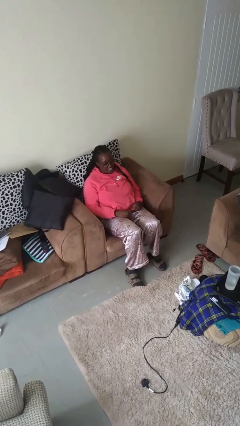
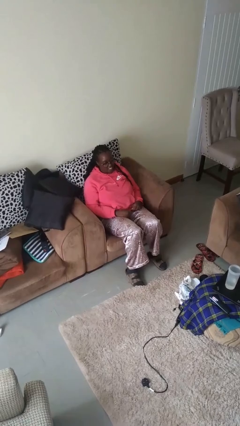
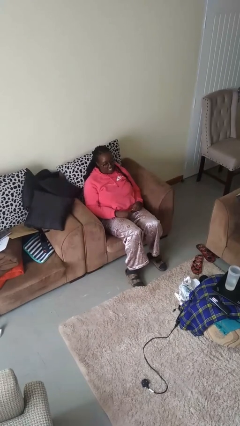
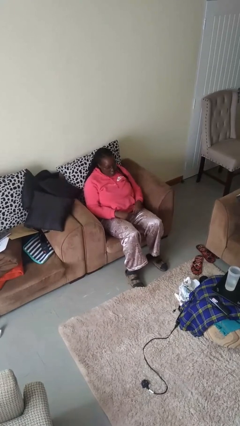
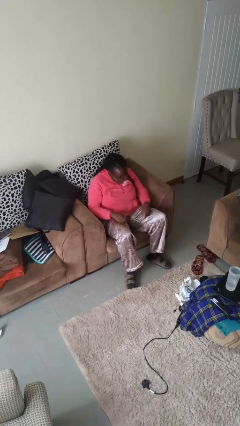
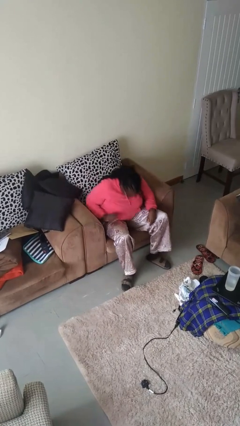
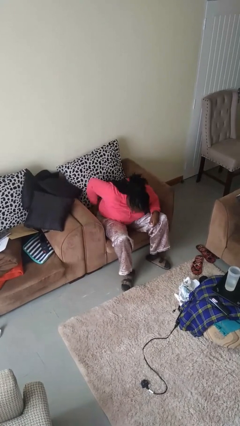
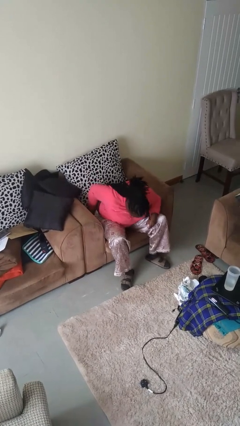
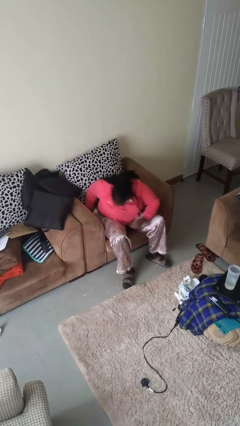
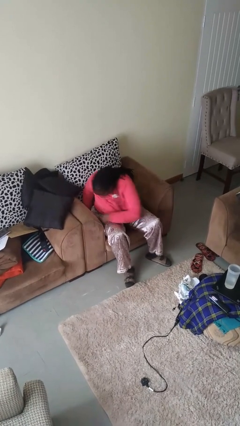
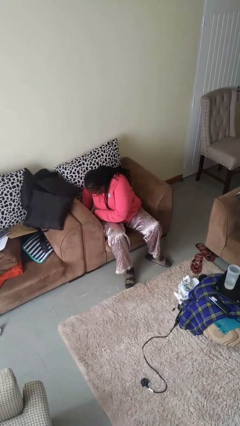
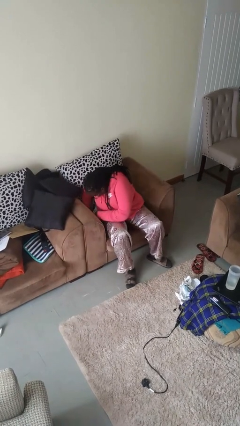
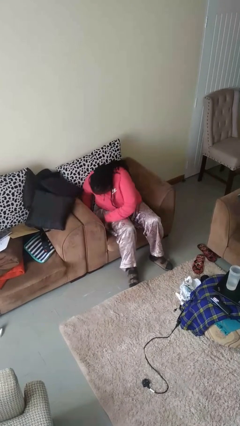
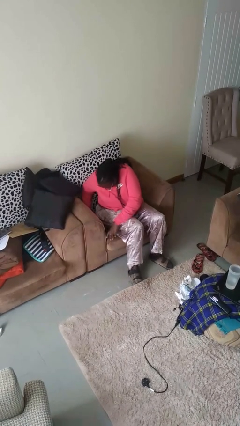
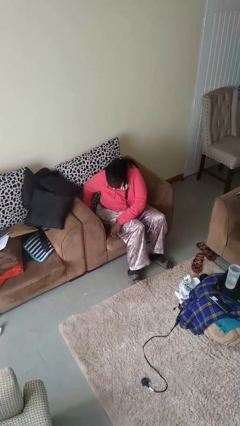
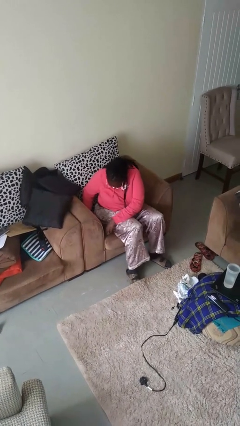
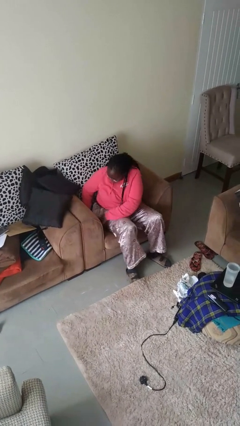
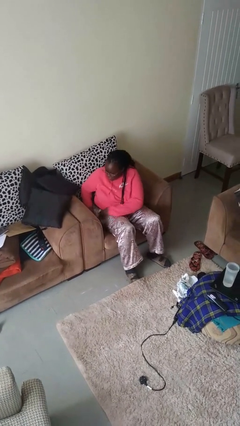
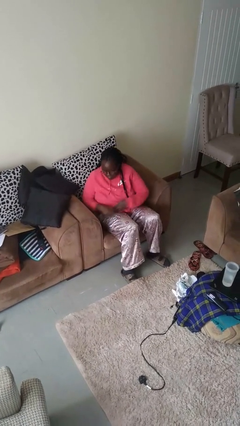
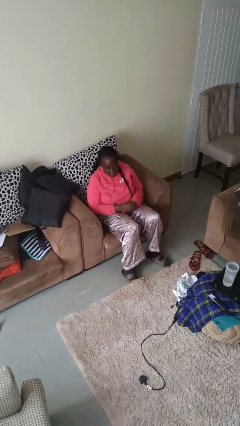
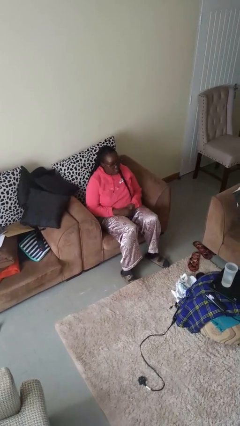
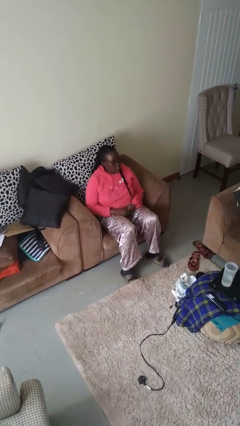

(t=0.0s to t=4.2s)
person searches in couch

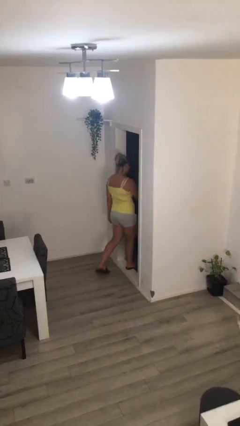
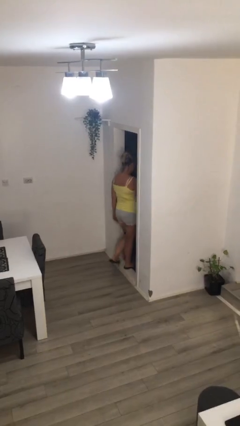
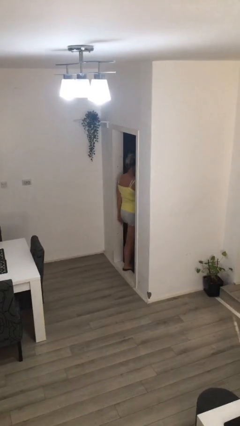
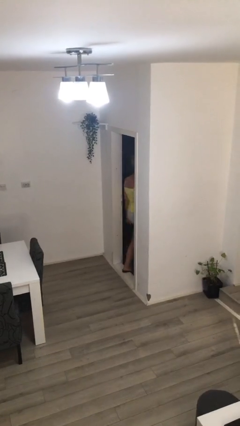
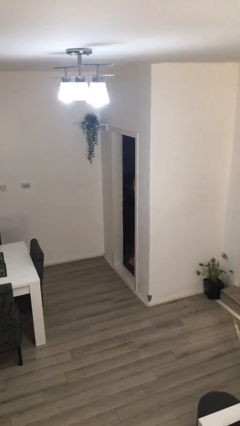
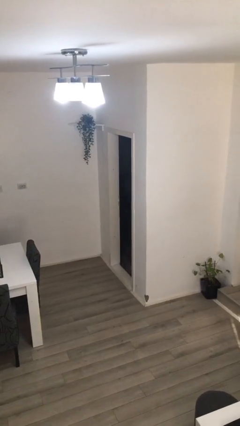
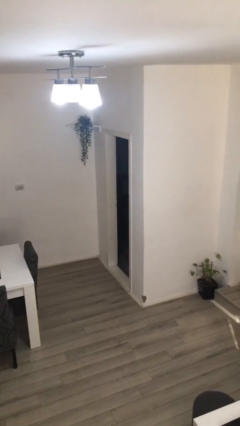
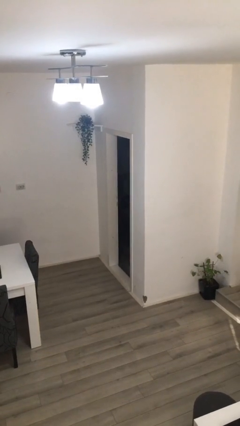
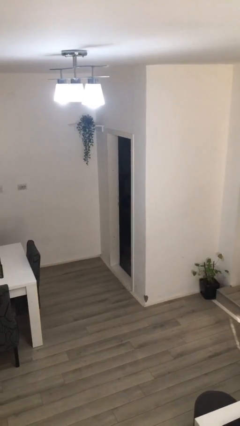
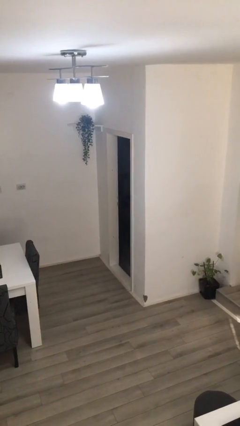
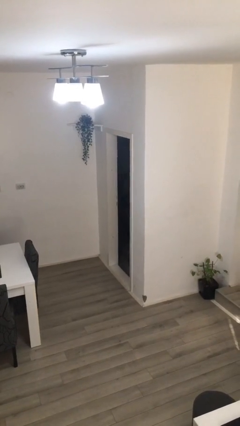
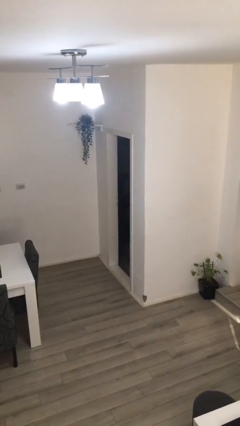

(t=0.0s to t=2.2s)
person exits scene through structure

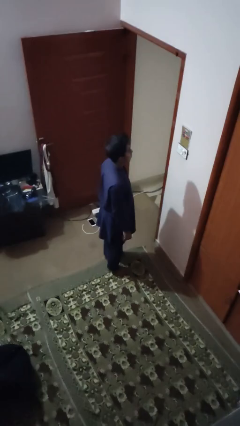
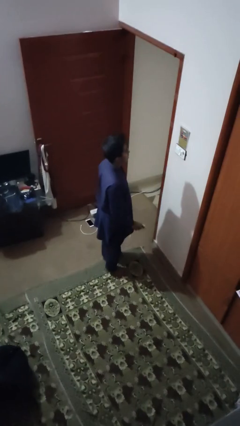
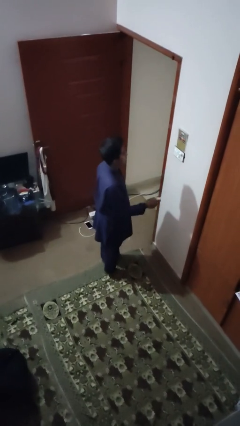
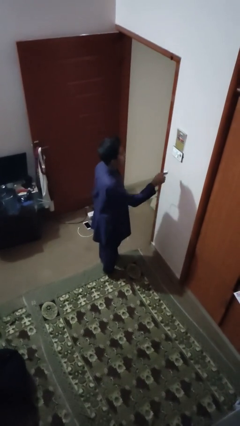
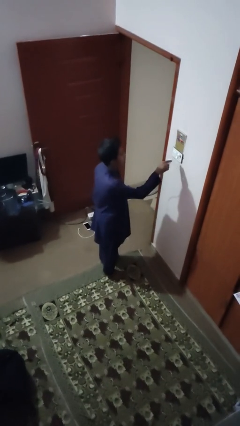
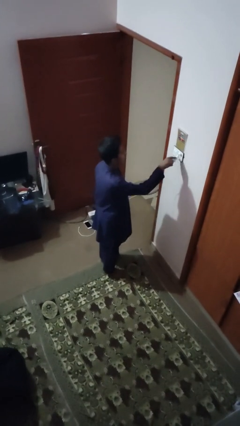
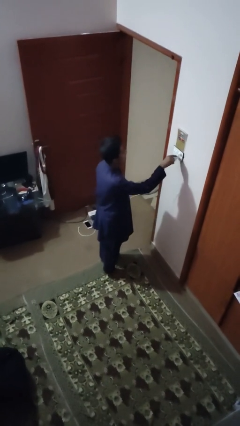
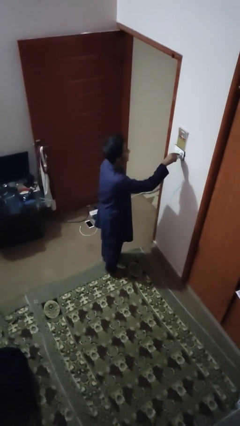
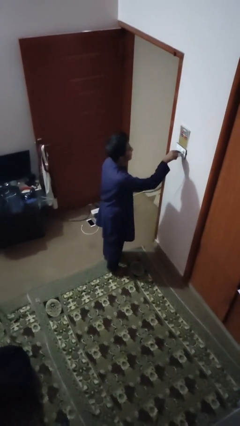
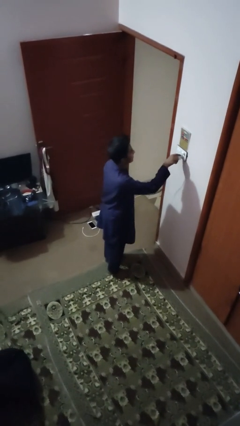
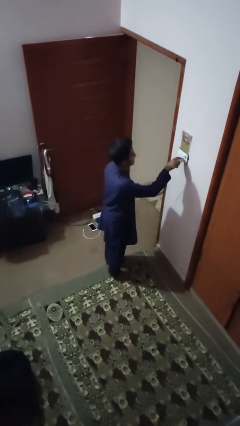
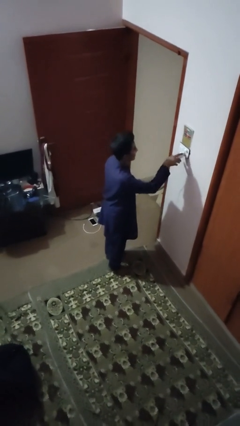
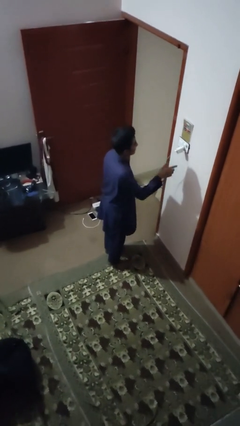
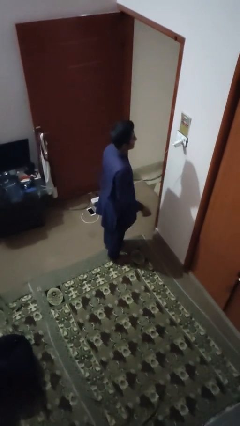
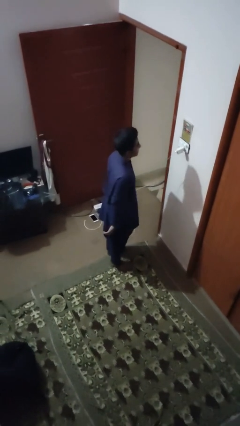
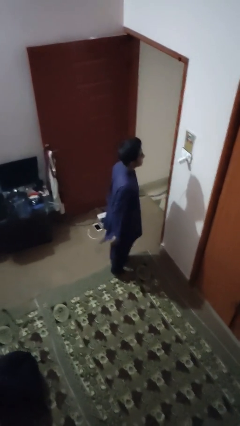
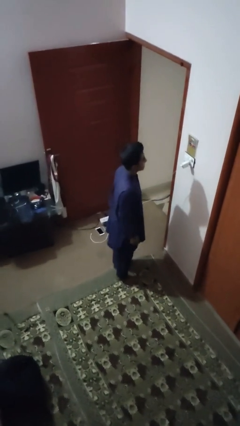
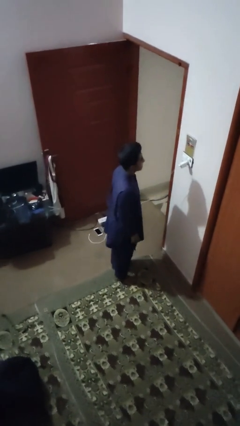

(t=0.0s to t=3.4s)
person plugs into electrical socket

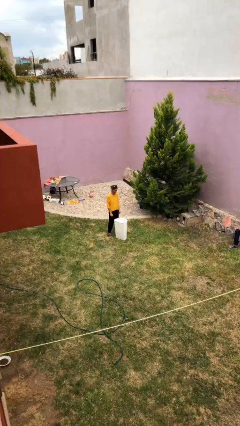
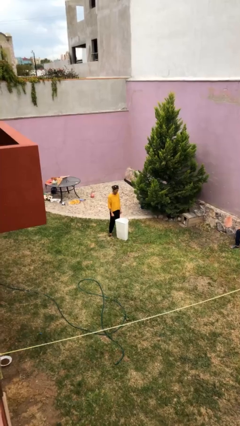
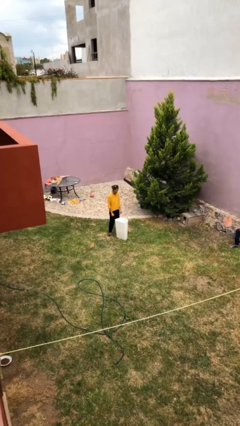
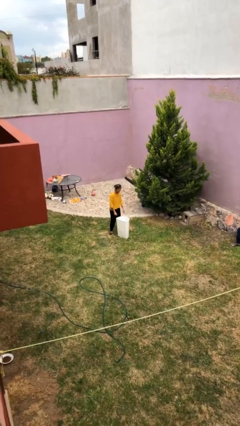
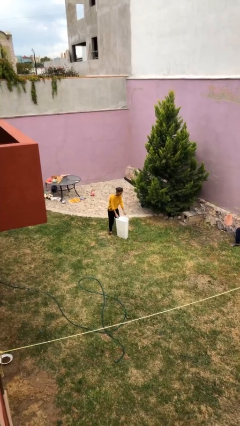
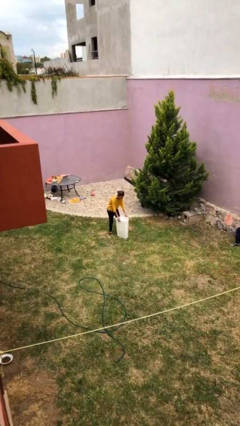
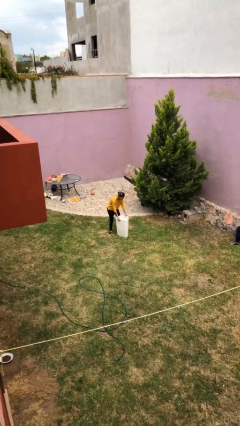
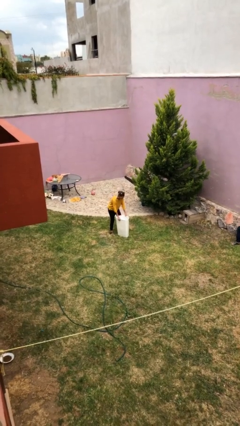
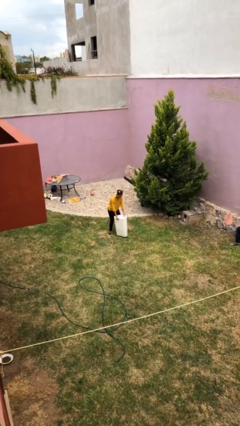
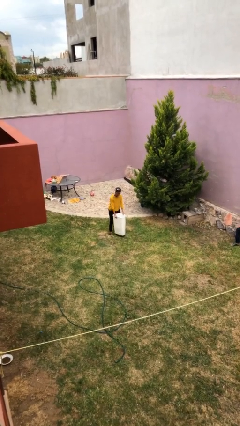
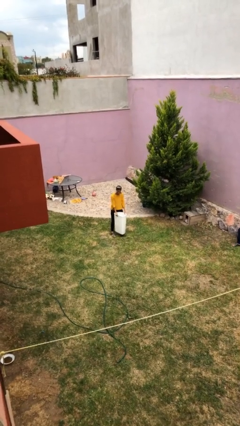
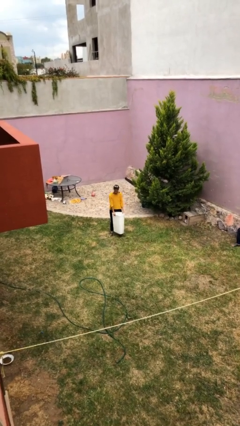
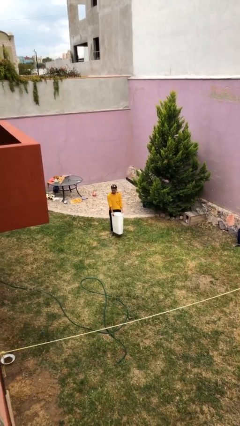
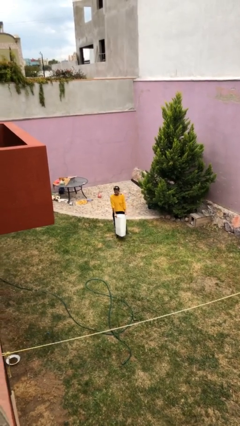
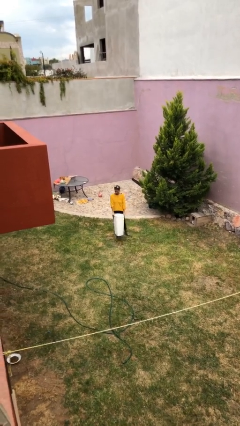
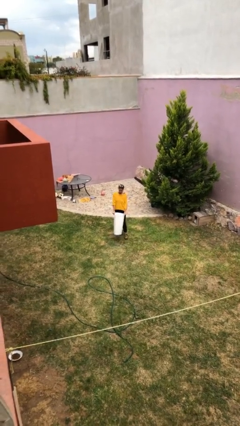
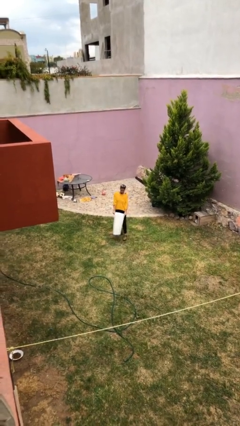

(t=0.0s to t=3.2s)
person picks up object from floor

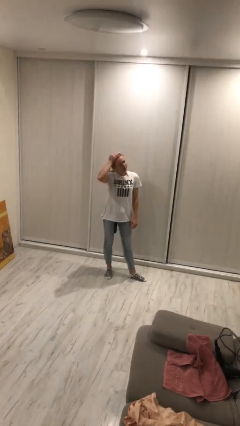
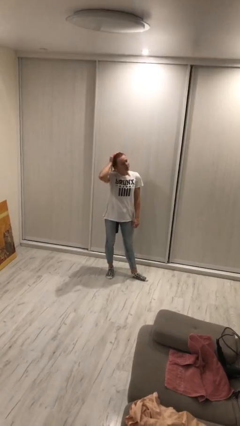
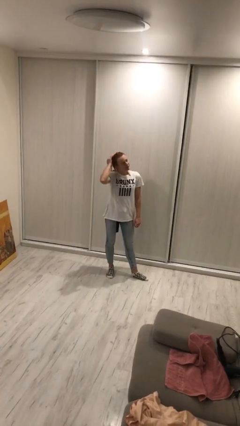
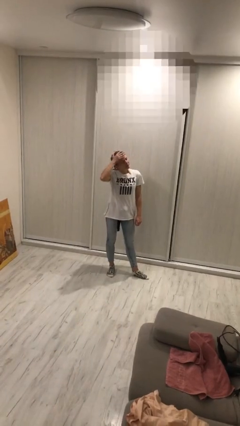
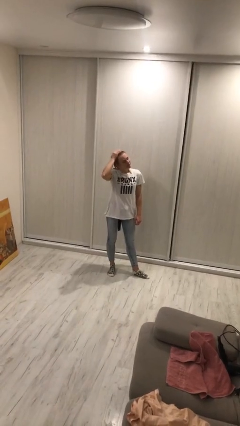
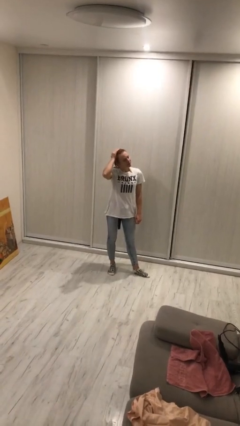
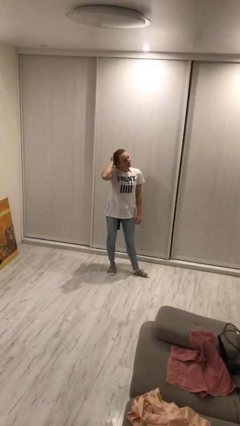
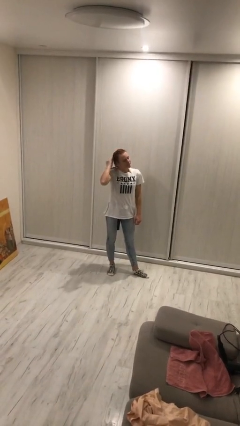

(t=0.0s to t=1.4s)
person pats head

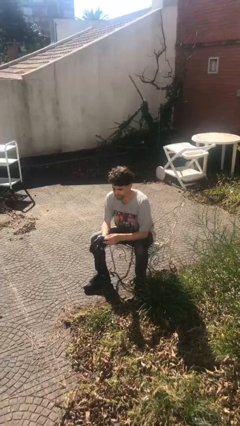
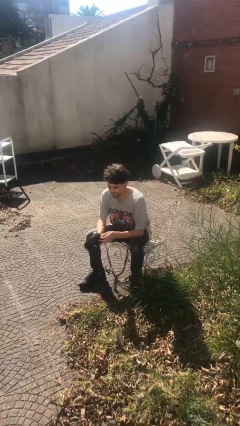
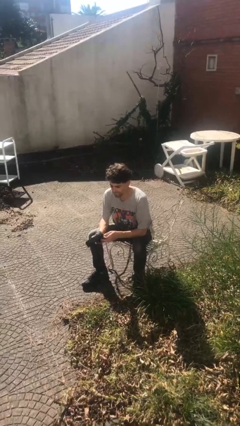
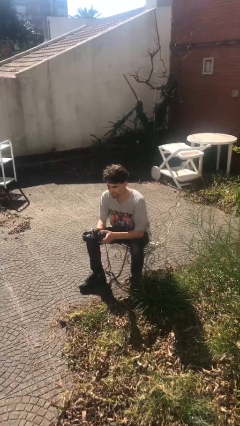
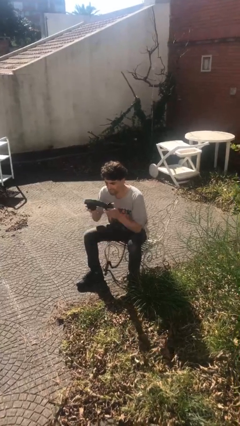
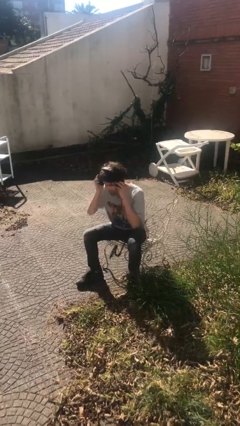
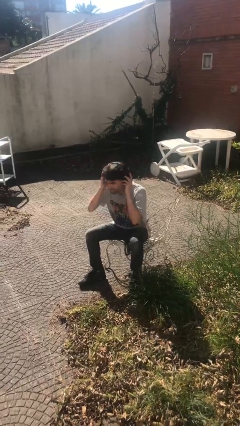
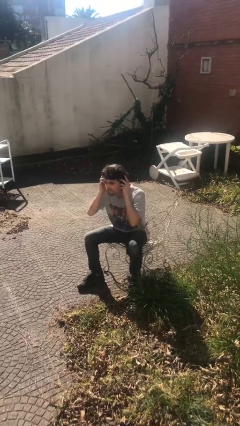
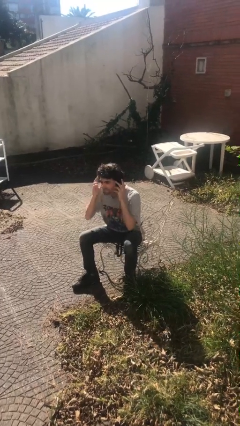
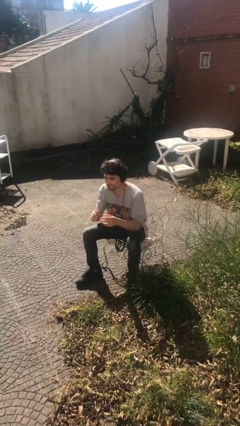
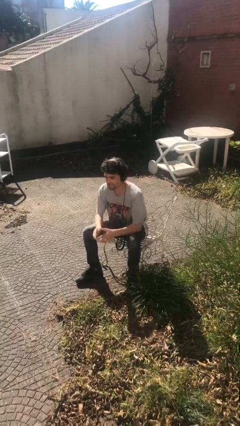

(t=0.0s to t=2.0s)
person puts on headphones

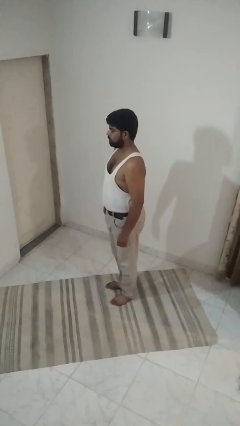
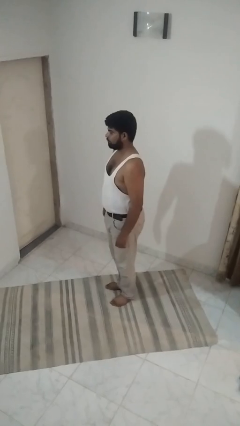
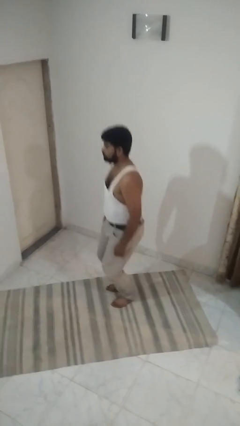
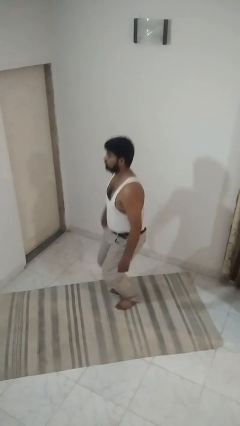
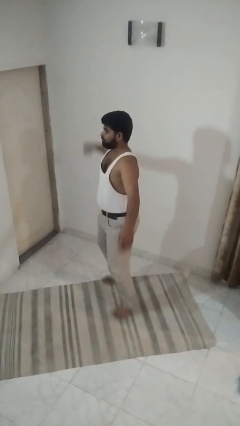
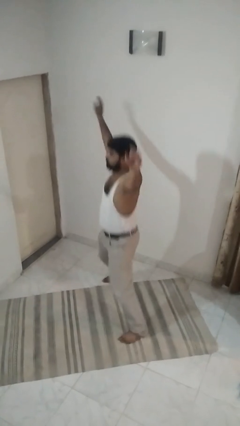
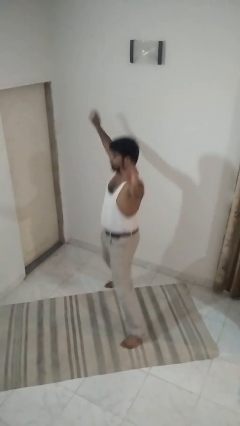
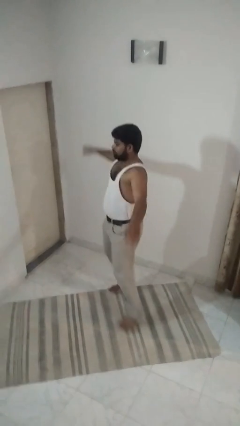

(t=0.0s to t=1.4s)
person exercises with jumping jacks
